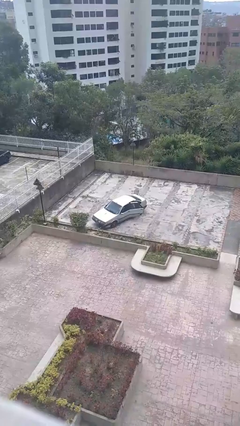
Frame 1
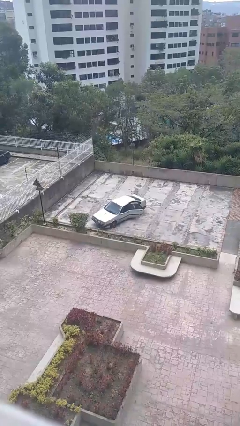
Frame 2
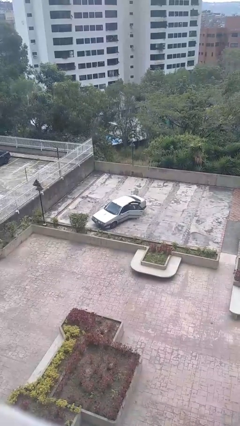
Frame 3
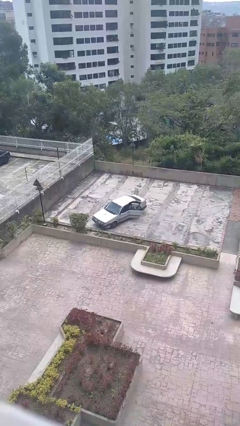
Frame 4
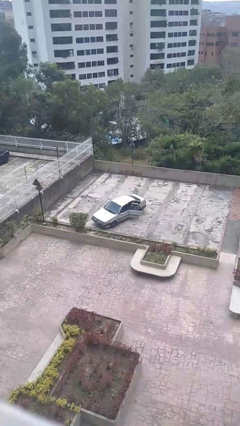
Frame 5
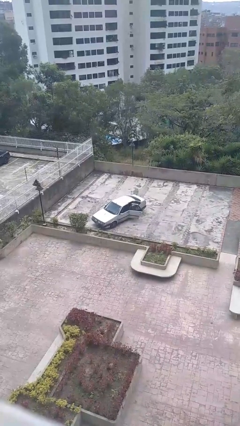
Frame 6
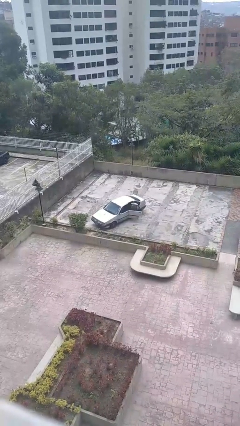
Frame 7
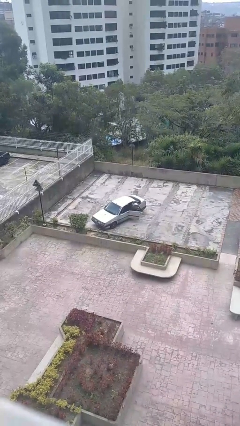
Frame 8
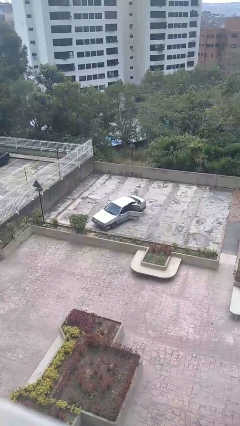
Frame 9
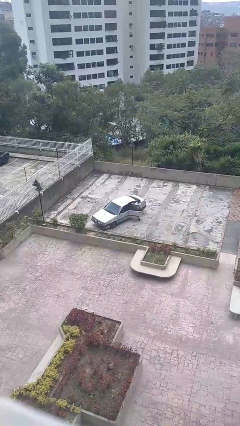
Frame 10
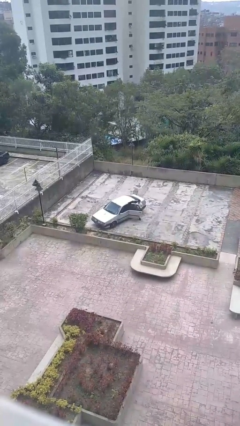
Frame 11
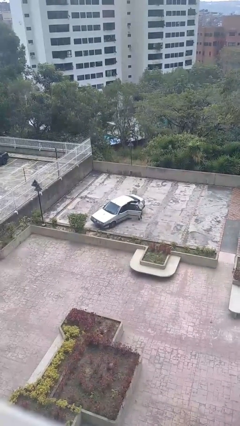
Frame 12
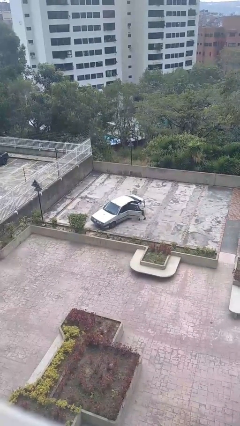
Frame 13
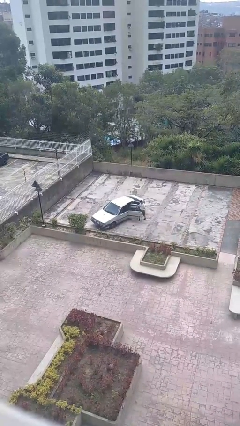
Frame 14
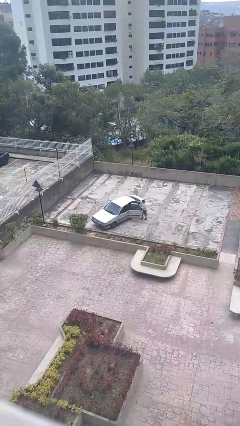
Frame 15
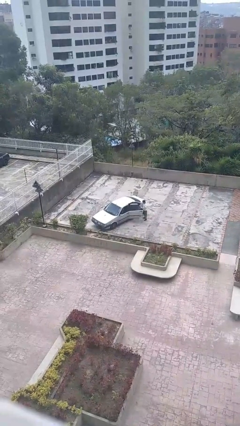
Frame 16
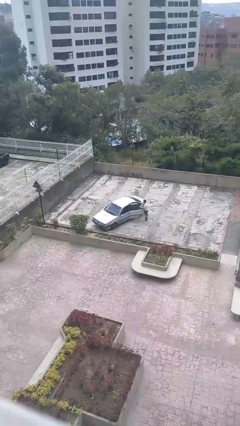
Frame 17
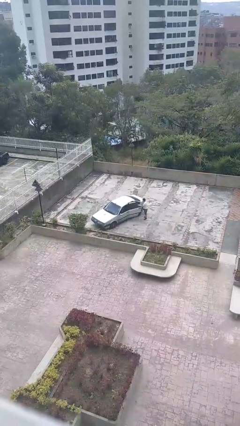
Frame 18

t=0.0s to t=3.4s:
car drops off person

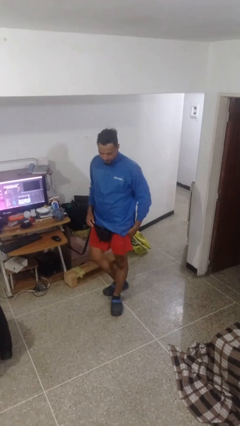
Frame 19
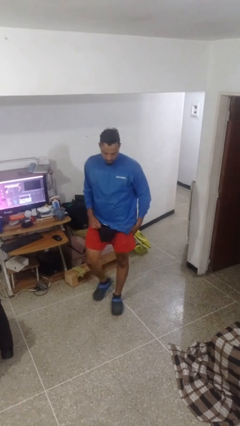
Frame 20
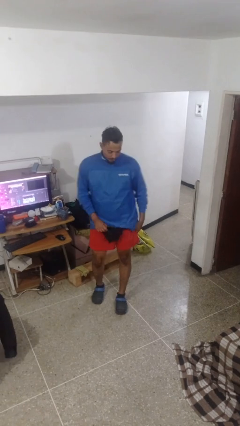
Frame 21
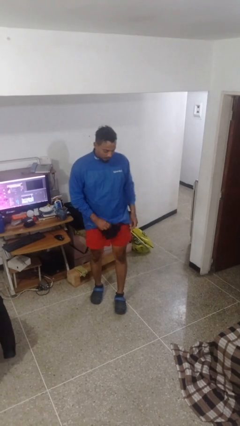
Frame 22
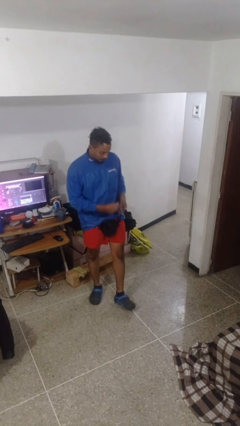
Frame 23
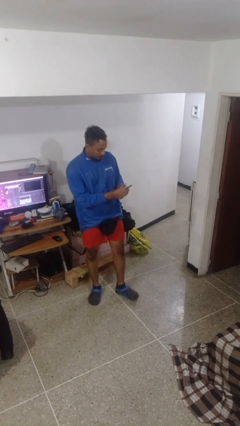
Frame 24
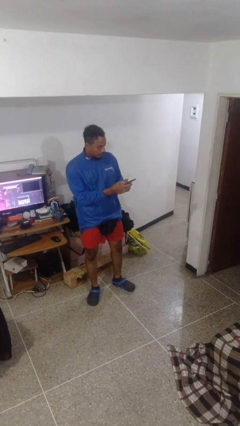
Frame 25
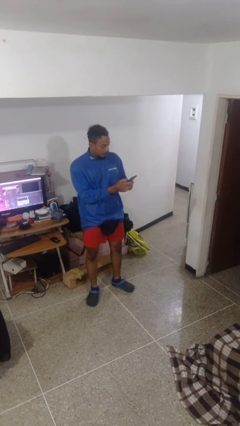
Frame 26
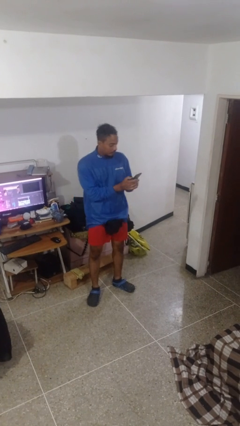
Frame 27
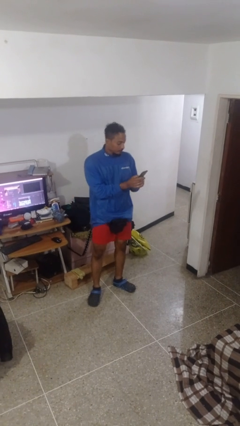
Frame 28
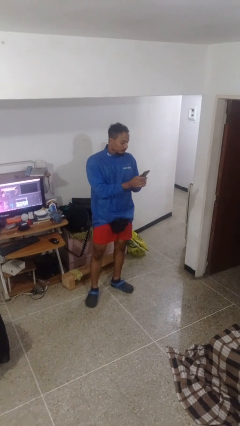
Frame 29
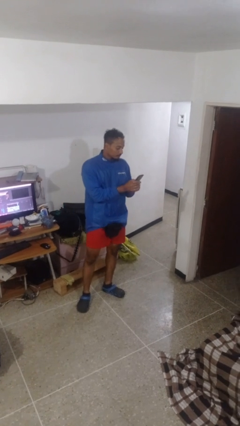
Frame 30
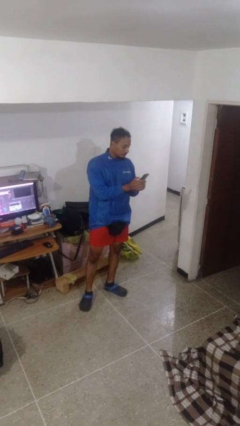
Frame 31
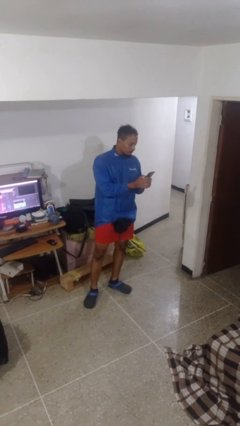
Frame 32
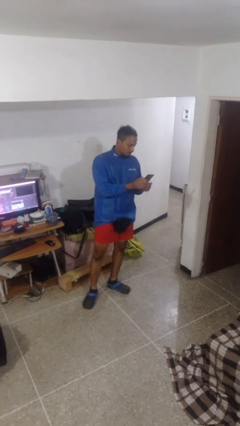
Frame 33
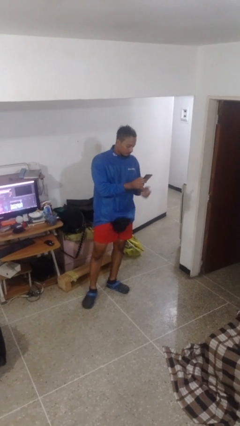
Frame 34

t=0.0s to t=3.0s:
person takes phone from pocket

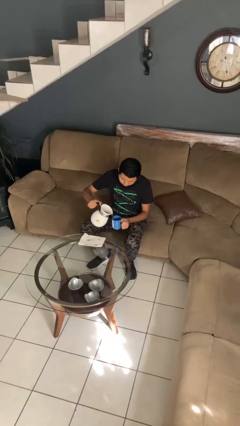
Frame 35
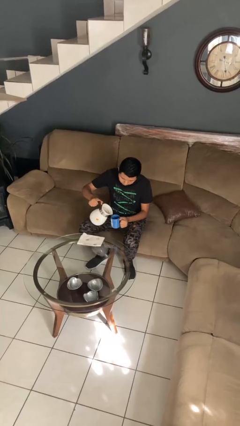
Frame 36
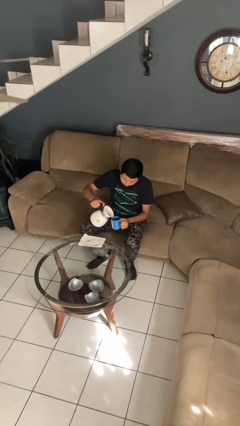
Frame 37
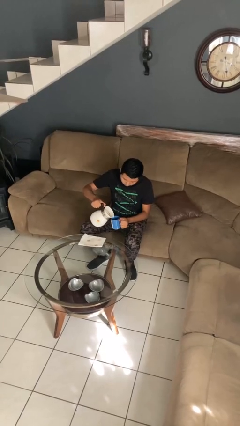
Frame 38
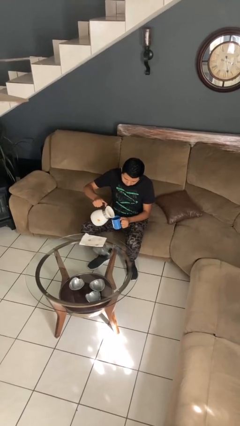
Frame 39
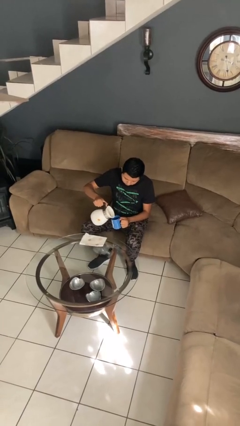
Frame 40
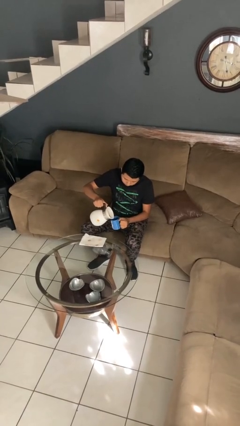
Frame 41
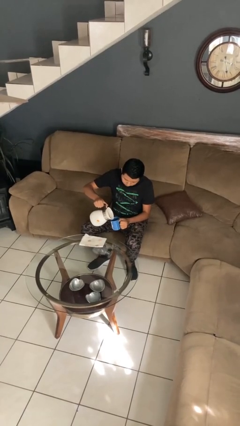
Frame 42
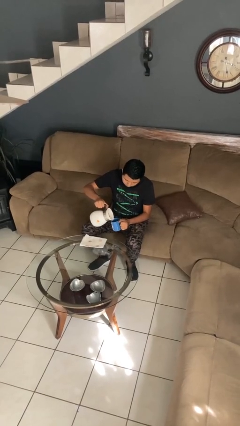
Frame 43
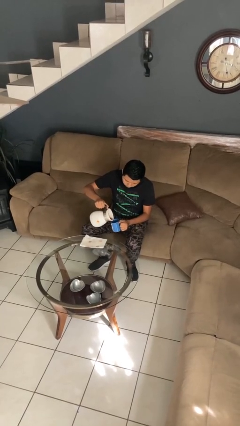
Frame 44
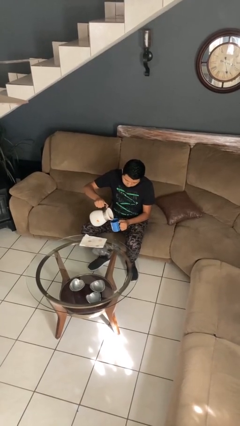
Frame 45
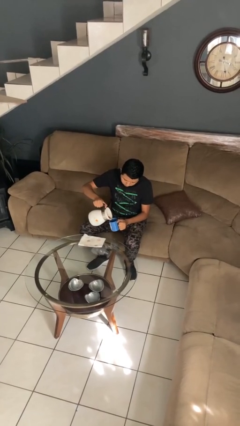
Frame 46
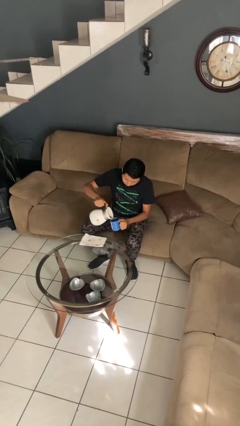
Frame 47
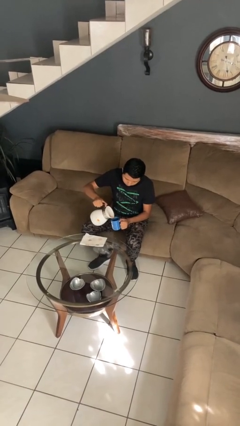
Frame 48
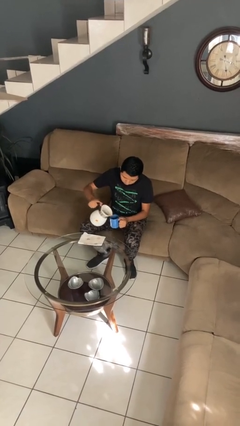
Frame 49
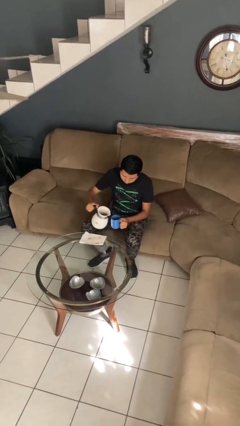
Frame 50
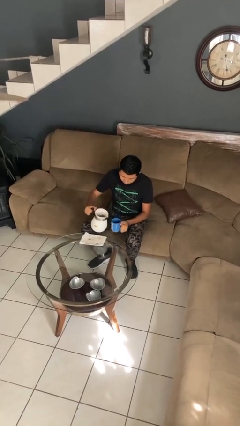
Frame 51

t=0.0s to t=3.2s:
person pours coffee into mug

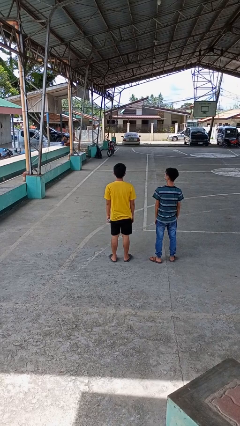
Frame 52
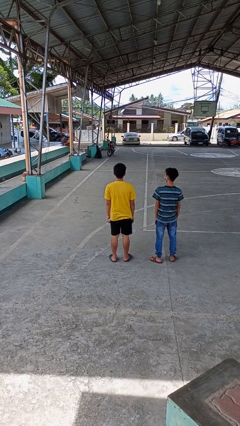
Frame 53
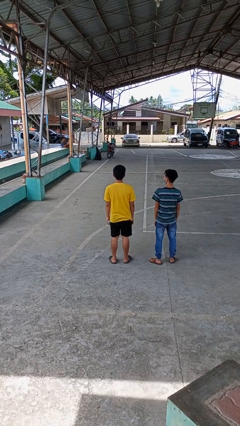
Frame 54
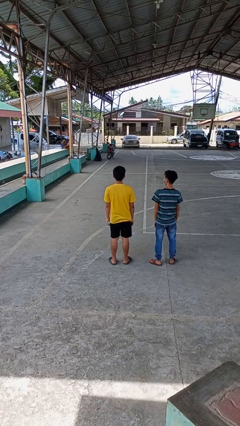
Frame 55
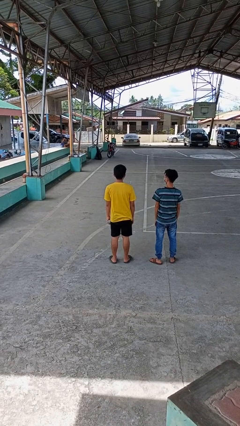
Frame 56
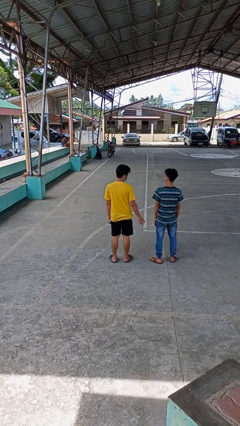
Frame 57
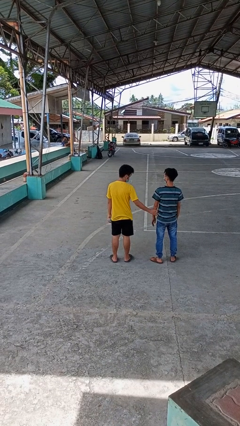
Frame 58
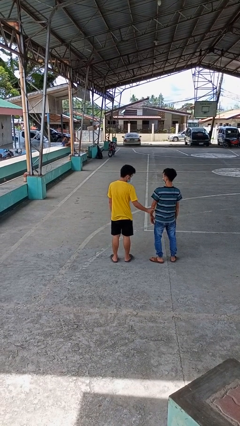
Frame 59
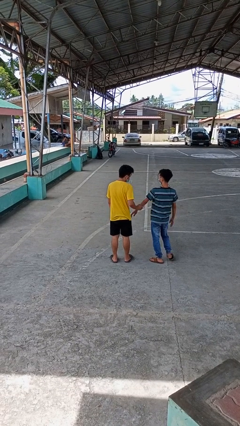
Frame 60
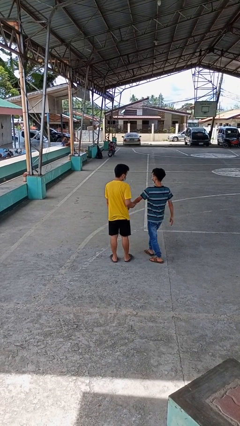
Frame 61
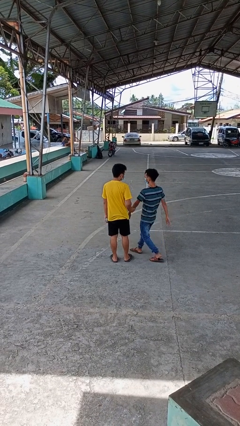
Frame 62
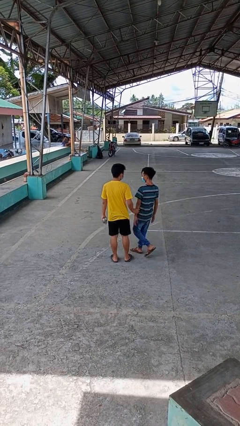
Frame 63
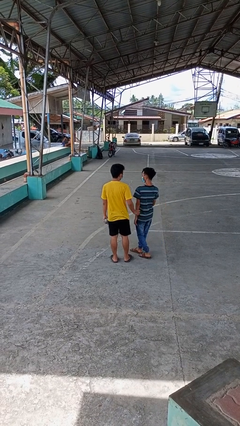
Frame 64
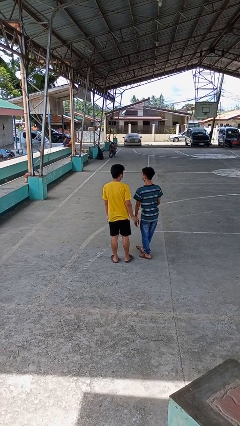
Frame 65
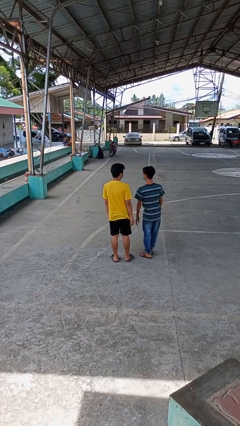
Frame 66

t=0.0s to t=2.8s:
person grabs person by forearm

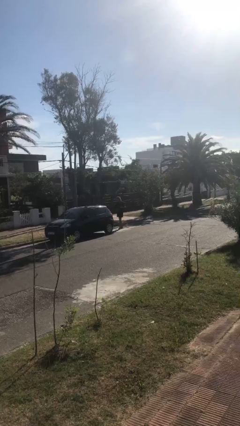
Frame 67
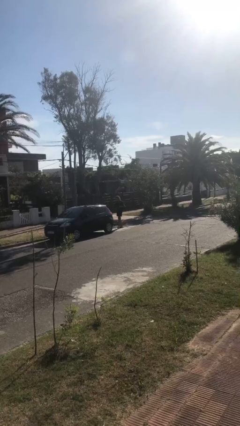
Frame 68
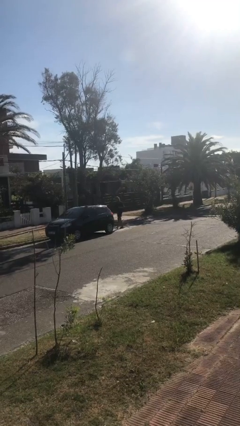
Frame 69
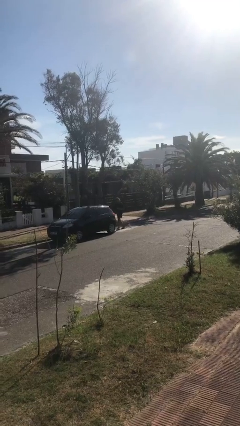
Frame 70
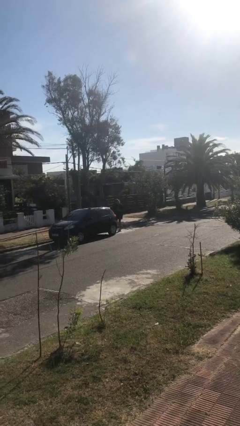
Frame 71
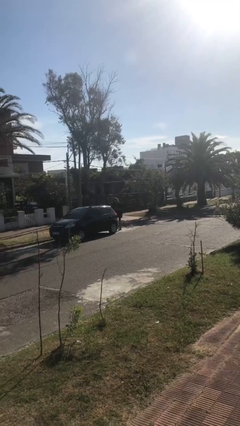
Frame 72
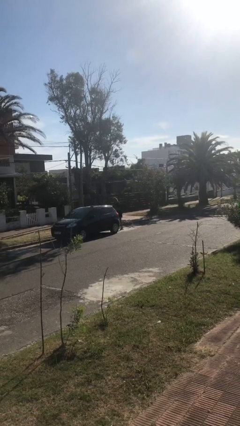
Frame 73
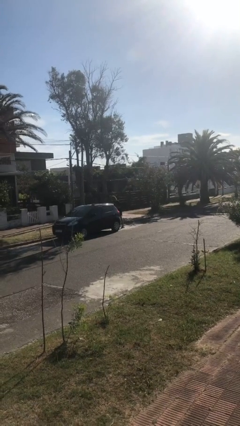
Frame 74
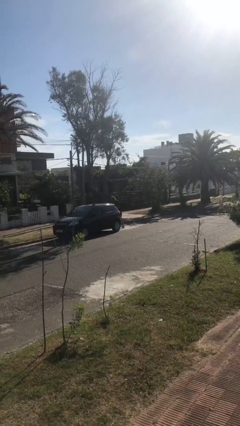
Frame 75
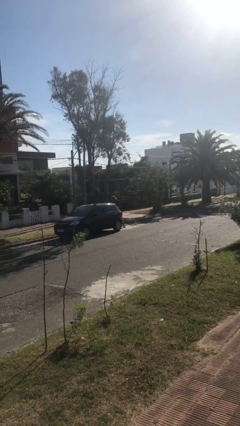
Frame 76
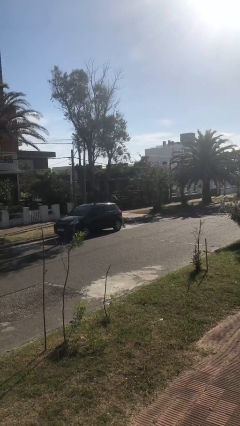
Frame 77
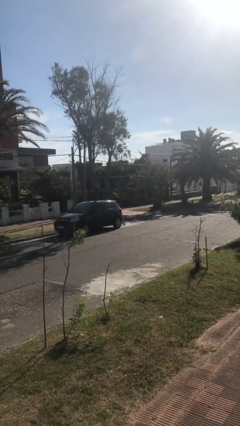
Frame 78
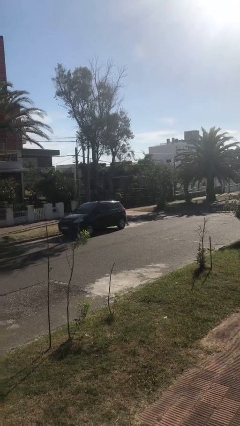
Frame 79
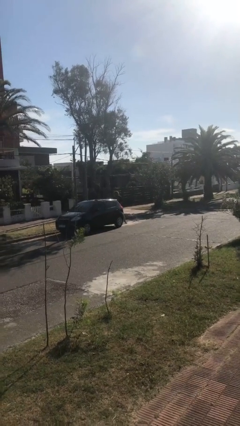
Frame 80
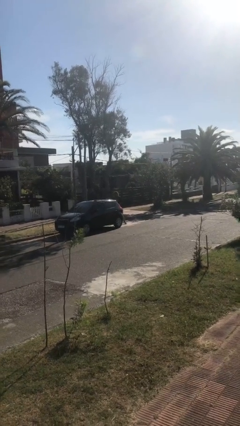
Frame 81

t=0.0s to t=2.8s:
person loads car

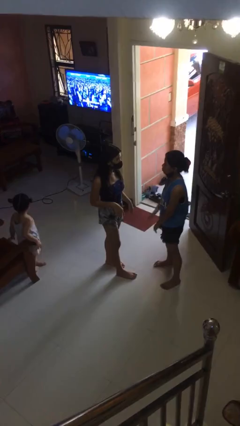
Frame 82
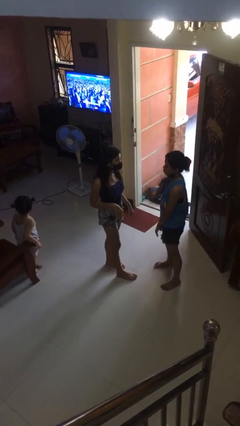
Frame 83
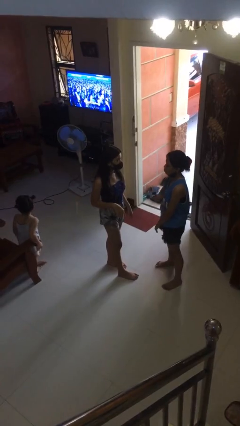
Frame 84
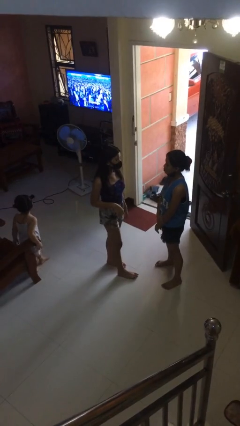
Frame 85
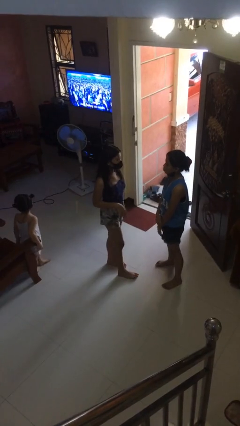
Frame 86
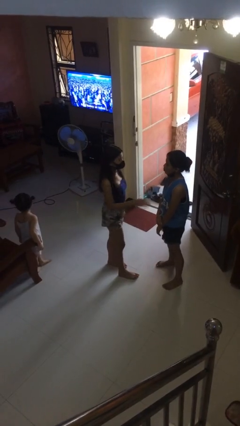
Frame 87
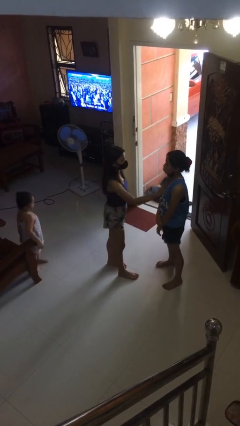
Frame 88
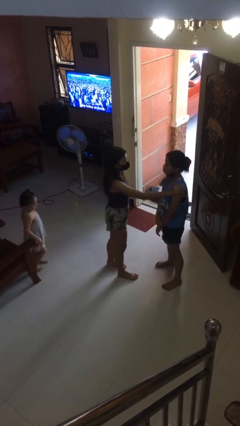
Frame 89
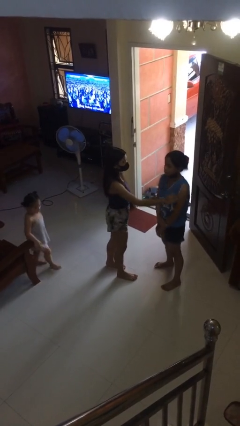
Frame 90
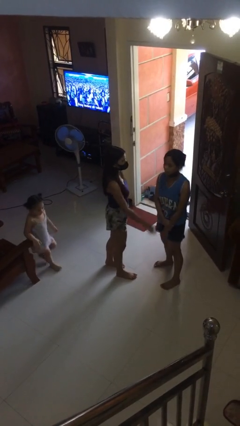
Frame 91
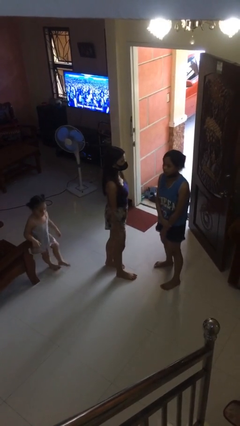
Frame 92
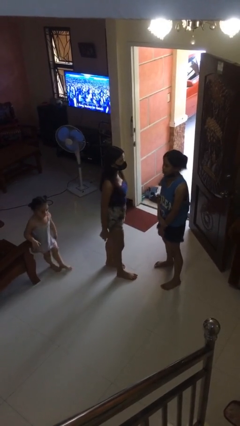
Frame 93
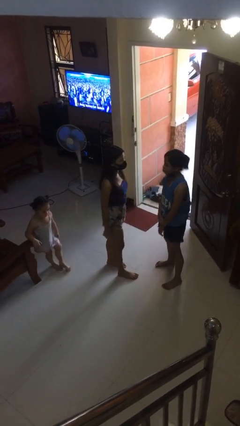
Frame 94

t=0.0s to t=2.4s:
person shoves person
